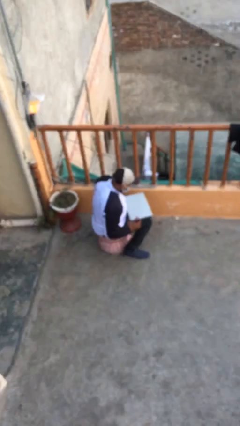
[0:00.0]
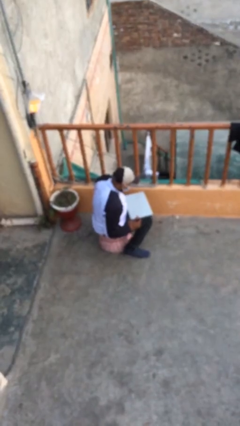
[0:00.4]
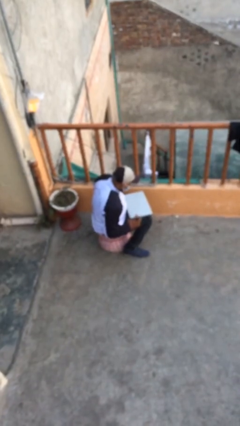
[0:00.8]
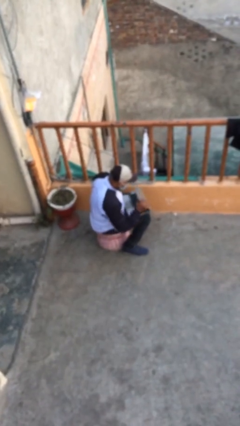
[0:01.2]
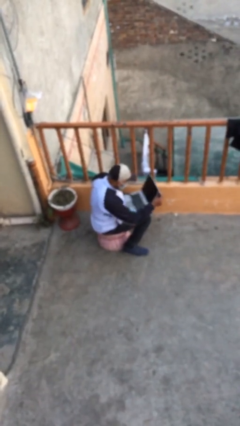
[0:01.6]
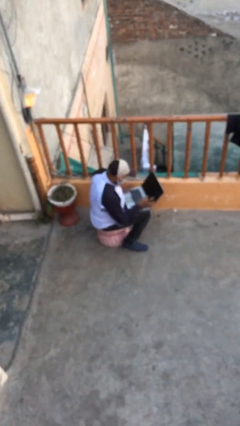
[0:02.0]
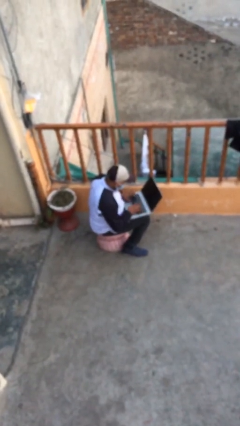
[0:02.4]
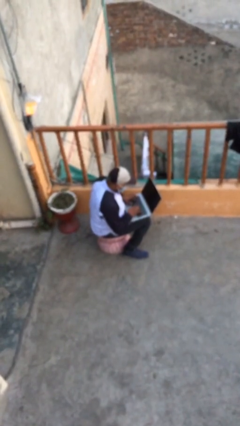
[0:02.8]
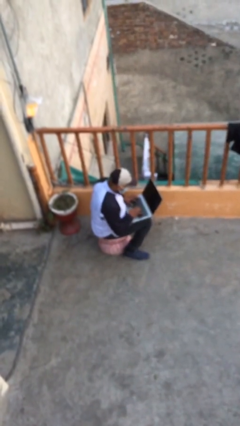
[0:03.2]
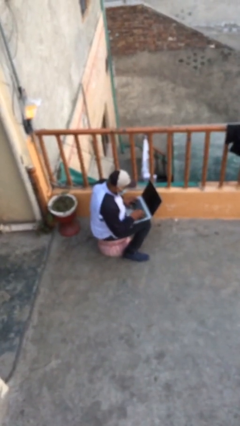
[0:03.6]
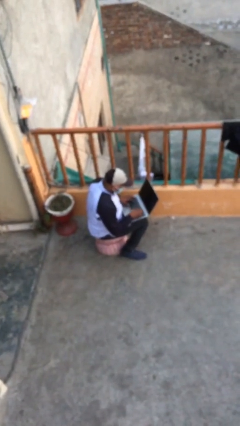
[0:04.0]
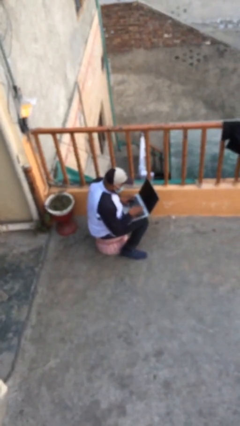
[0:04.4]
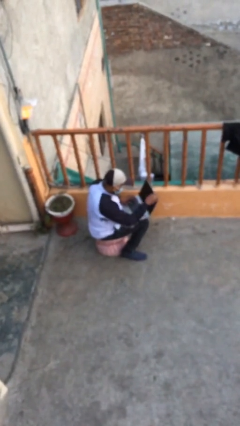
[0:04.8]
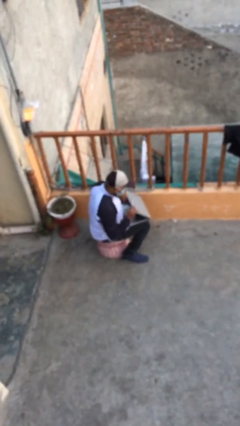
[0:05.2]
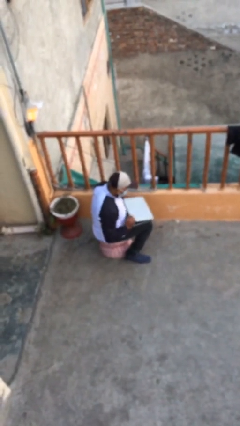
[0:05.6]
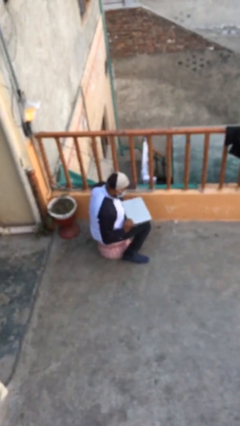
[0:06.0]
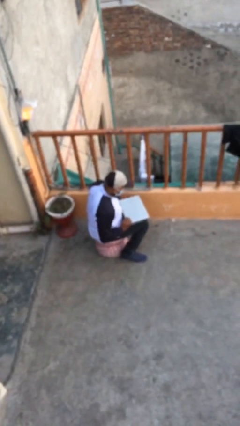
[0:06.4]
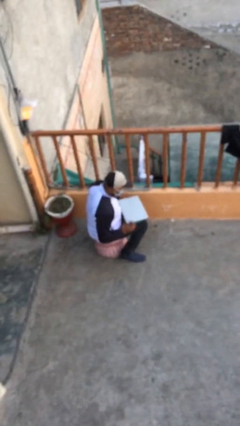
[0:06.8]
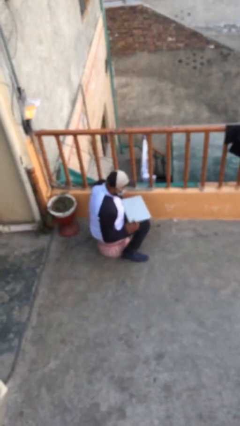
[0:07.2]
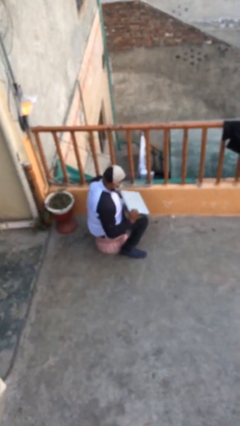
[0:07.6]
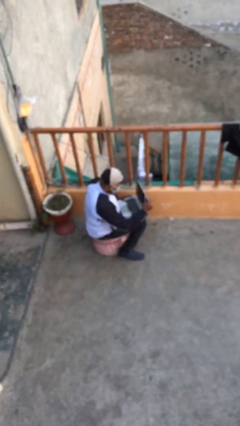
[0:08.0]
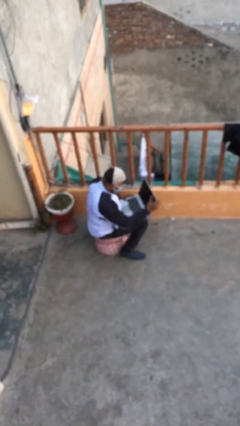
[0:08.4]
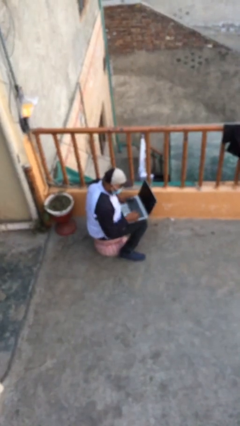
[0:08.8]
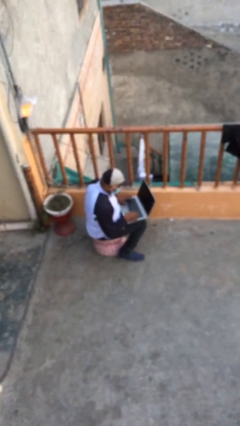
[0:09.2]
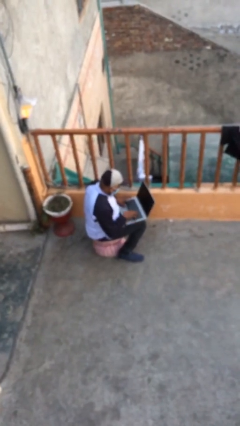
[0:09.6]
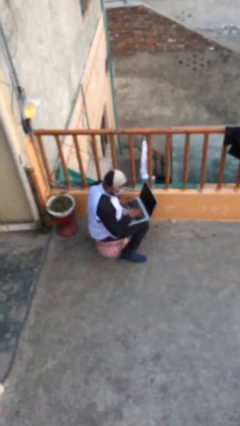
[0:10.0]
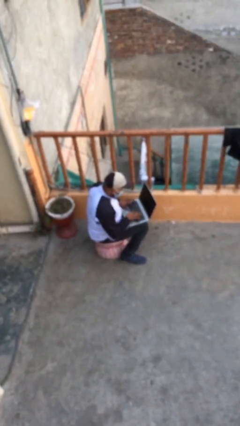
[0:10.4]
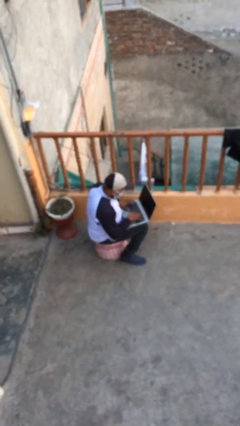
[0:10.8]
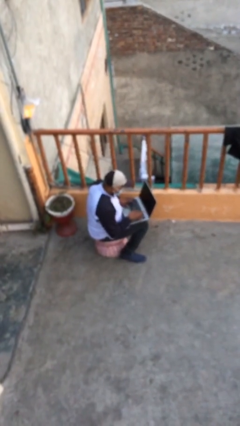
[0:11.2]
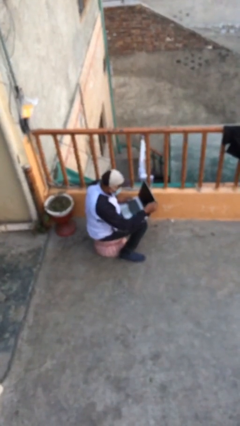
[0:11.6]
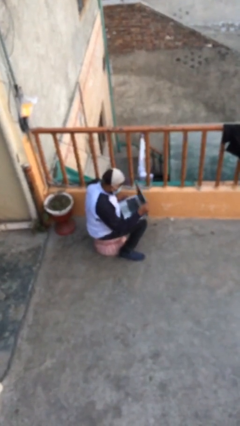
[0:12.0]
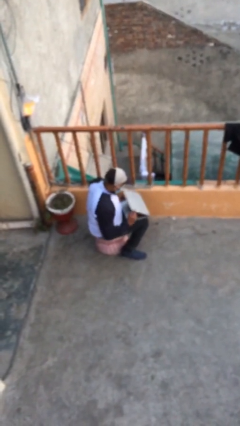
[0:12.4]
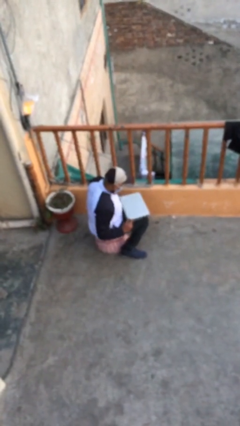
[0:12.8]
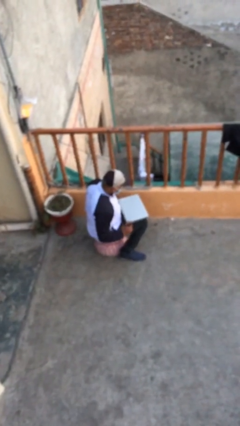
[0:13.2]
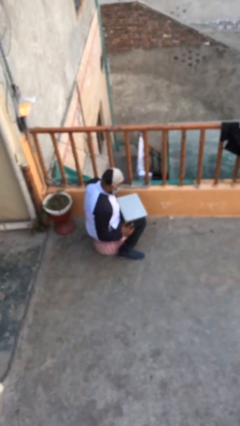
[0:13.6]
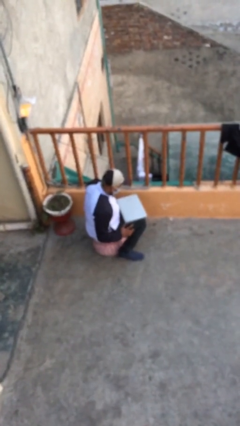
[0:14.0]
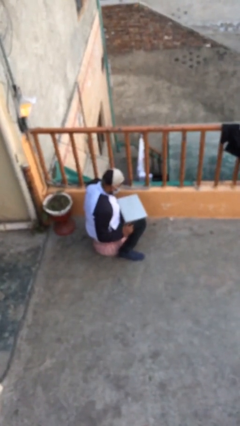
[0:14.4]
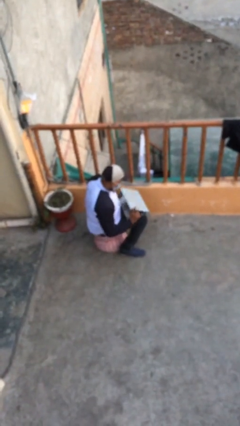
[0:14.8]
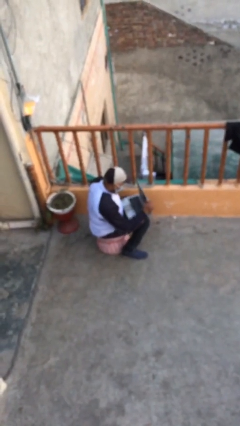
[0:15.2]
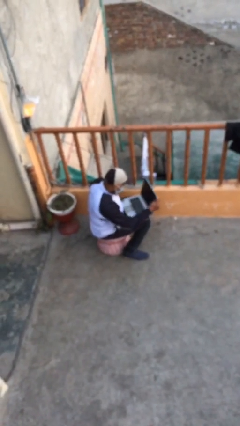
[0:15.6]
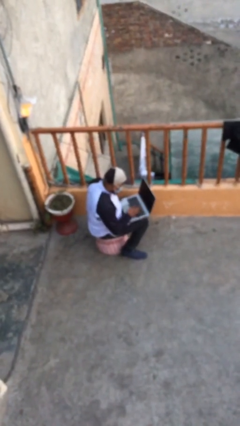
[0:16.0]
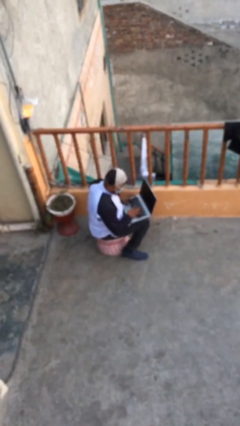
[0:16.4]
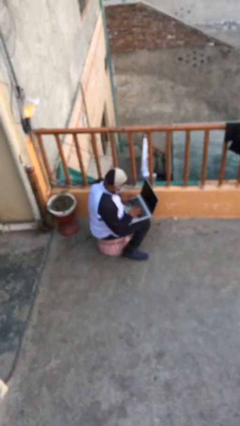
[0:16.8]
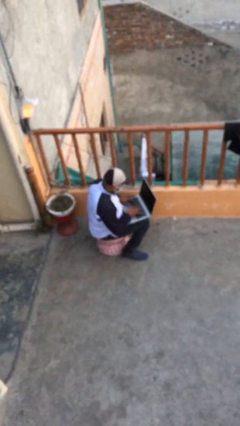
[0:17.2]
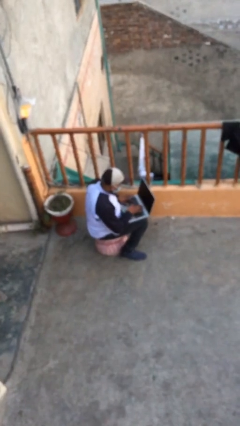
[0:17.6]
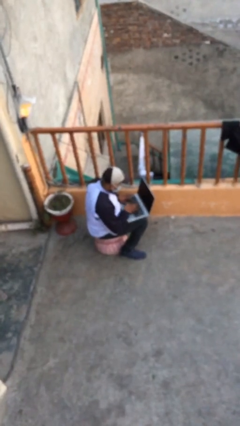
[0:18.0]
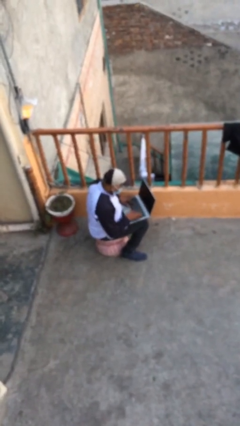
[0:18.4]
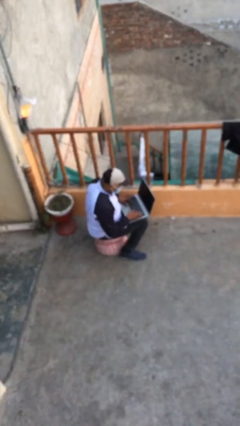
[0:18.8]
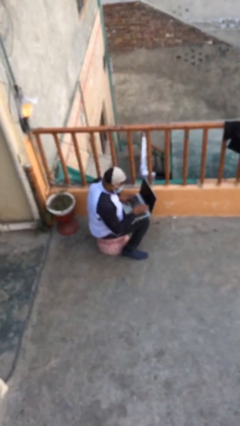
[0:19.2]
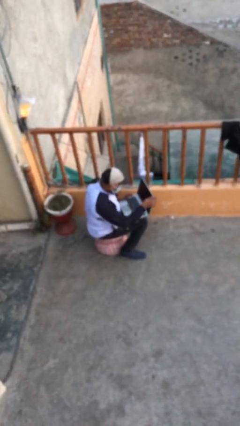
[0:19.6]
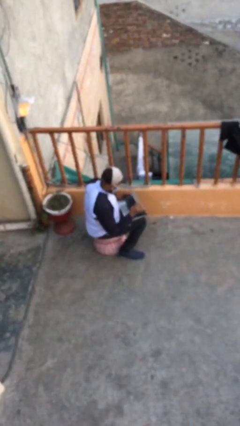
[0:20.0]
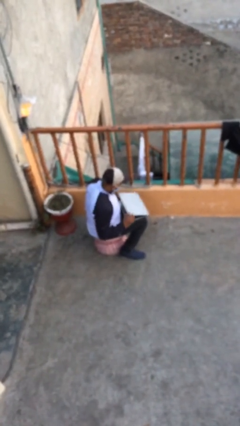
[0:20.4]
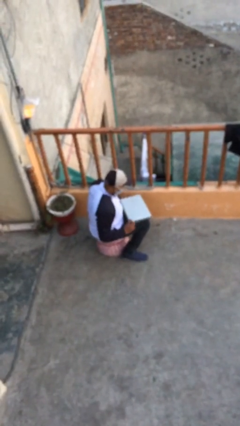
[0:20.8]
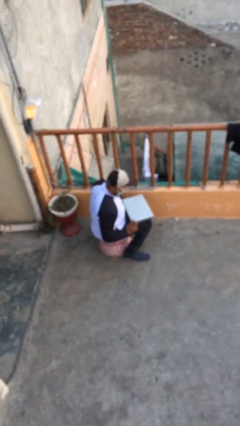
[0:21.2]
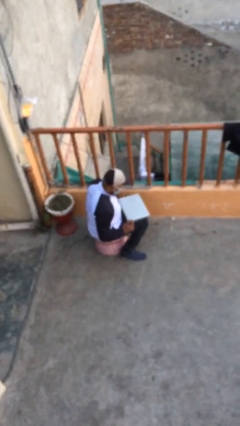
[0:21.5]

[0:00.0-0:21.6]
person interacts with laptop

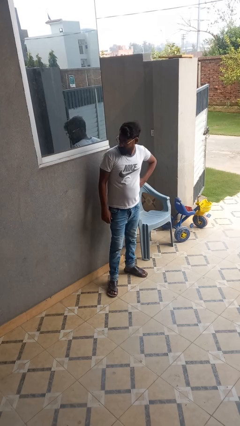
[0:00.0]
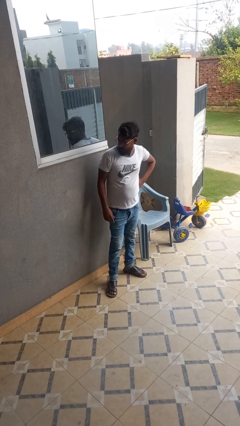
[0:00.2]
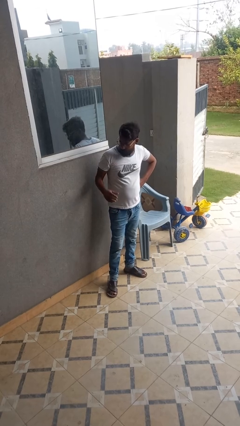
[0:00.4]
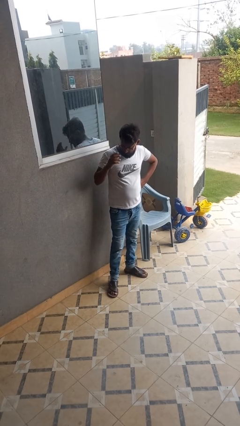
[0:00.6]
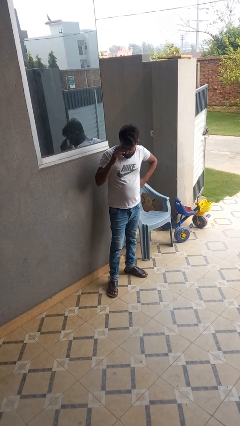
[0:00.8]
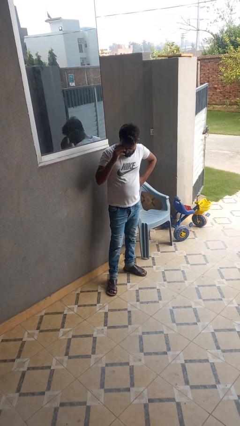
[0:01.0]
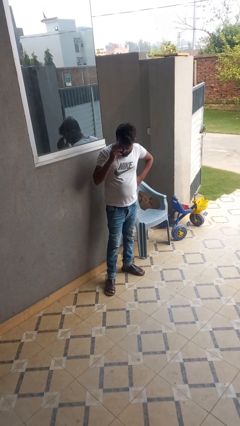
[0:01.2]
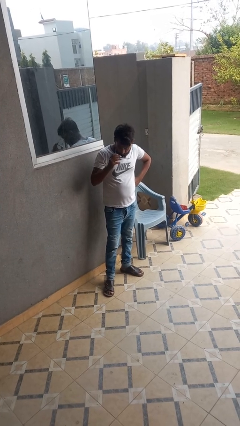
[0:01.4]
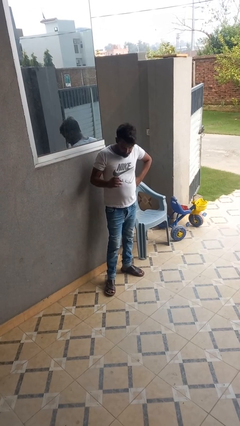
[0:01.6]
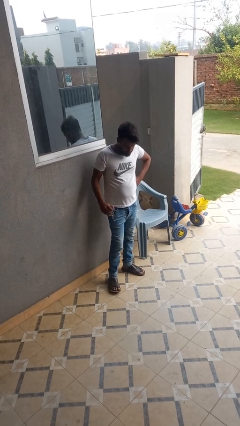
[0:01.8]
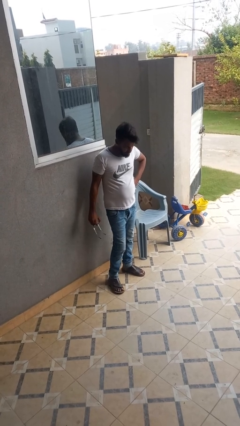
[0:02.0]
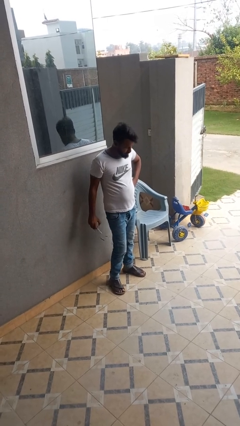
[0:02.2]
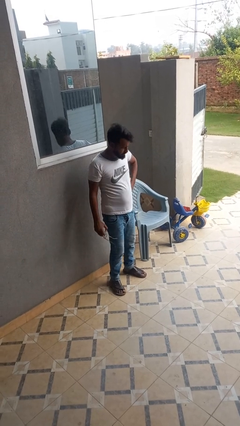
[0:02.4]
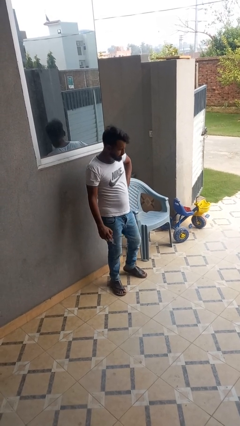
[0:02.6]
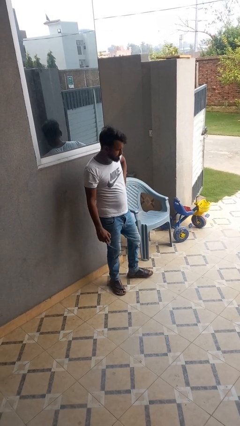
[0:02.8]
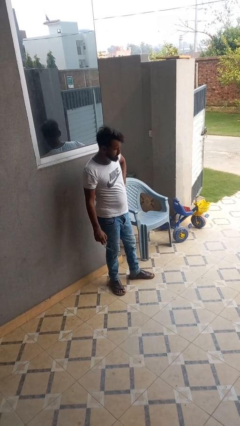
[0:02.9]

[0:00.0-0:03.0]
person takes off glasses

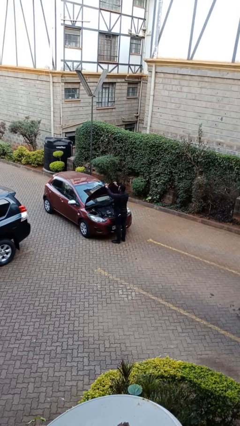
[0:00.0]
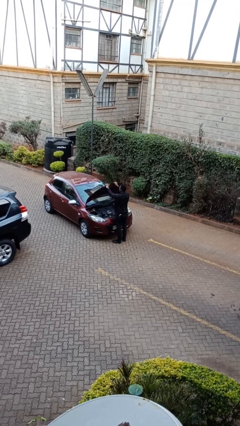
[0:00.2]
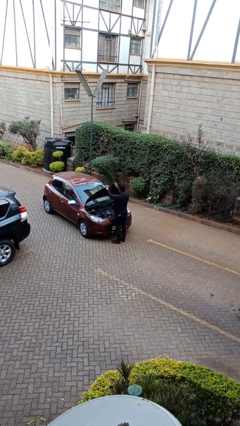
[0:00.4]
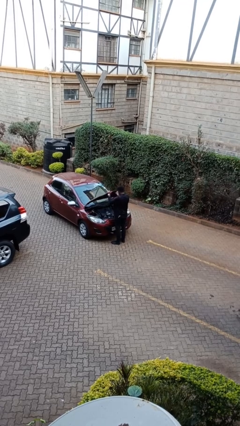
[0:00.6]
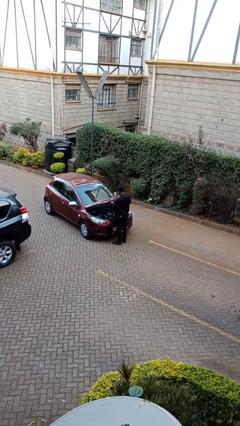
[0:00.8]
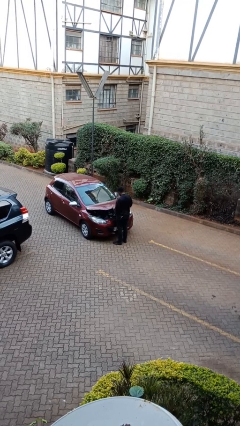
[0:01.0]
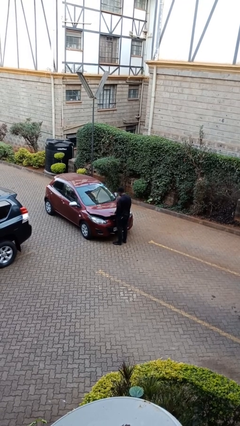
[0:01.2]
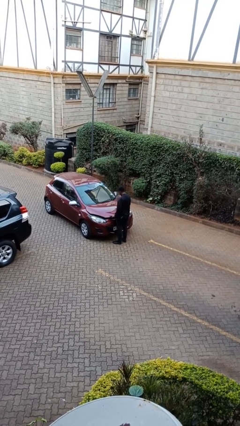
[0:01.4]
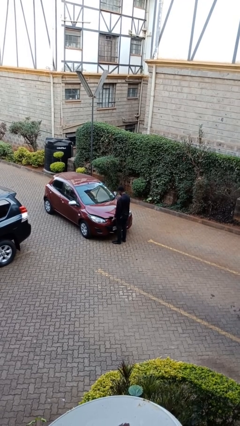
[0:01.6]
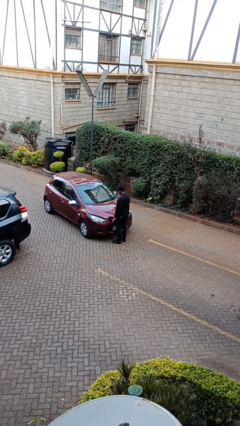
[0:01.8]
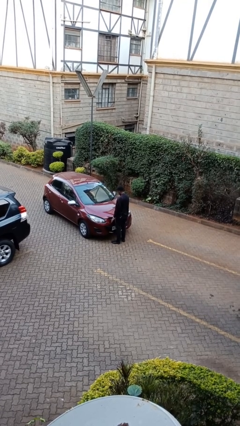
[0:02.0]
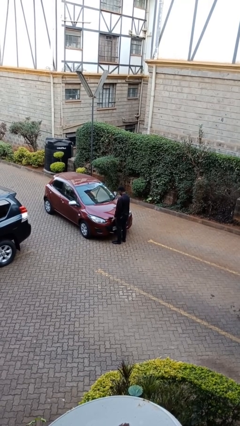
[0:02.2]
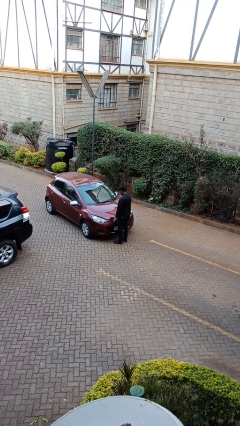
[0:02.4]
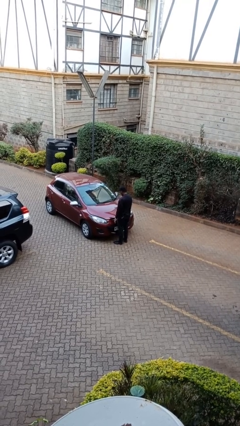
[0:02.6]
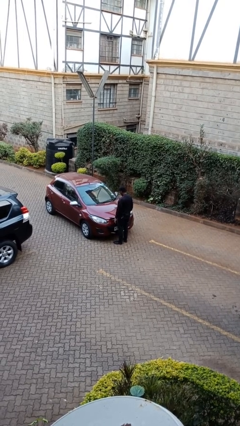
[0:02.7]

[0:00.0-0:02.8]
person closes car hood

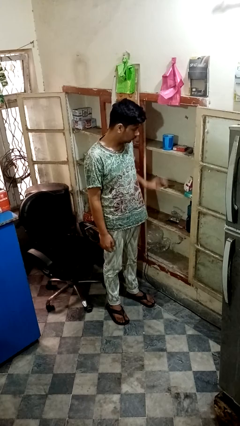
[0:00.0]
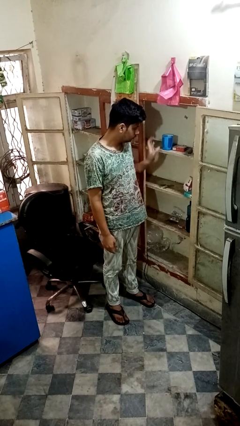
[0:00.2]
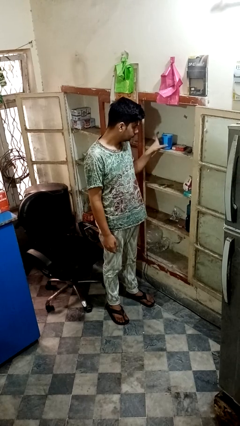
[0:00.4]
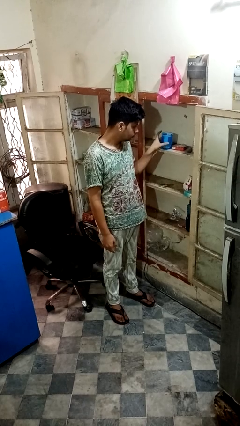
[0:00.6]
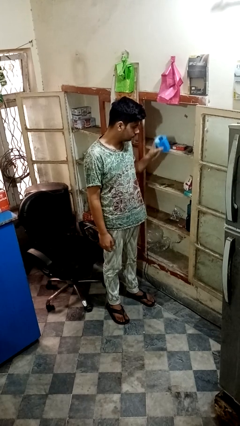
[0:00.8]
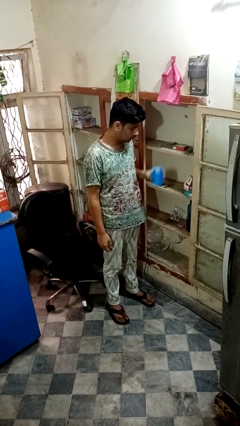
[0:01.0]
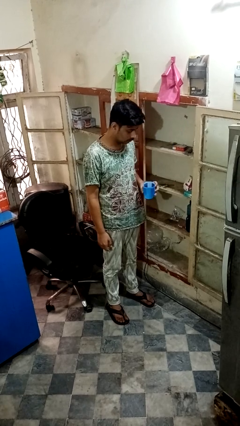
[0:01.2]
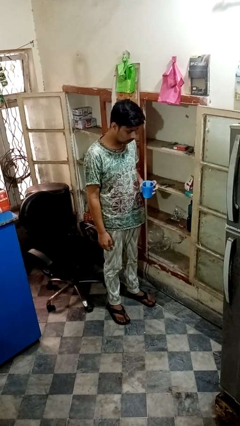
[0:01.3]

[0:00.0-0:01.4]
person takes object from cabinet
